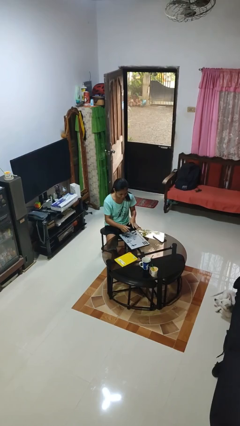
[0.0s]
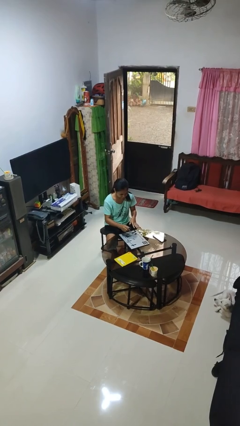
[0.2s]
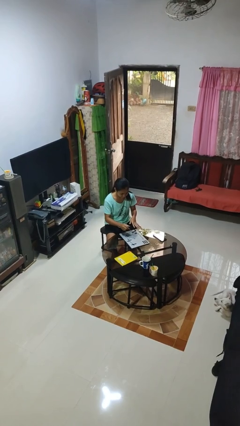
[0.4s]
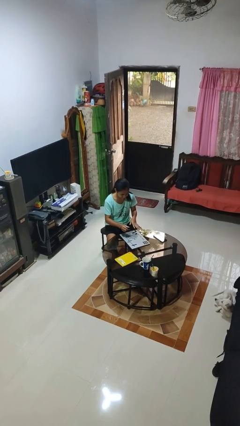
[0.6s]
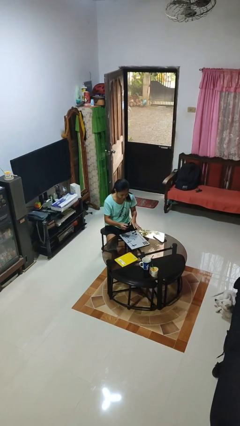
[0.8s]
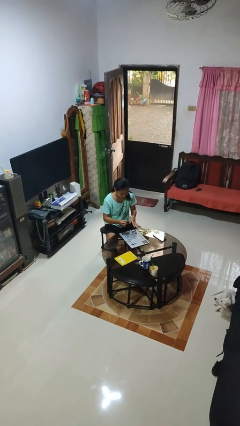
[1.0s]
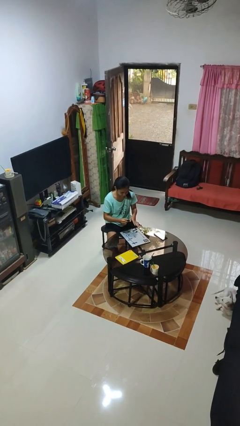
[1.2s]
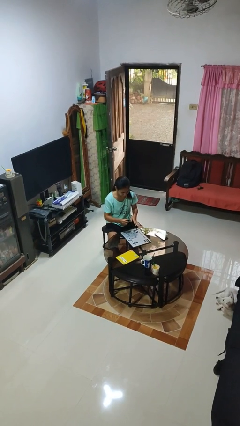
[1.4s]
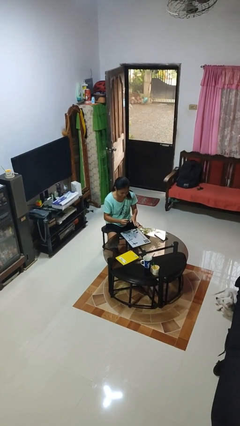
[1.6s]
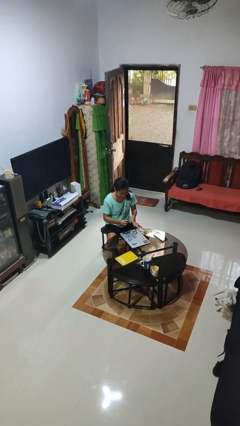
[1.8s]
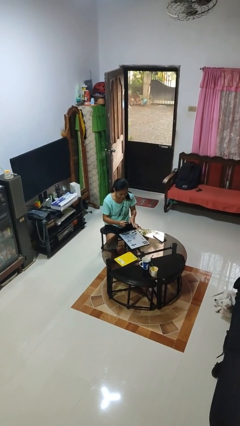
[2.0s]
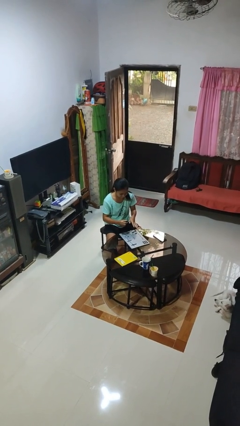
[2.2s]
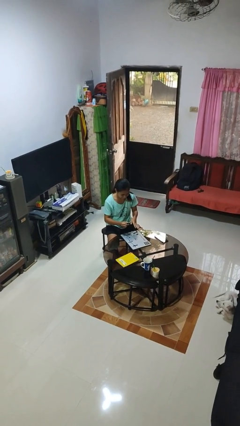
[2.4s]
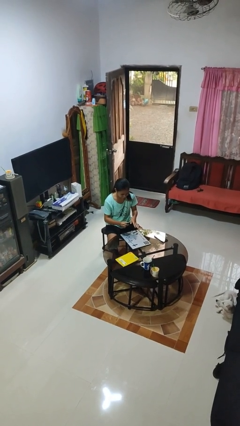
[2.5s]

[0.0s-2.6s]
person paints fingernails

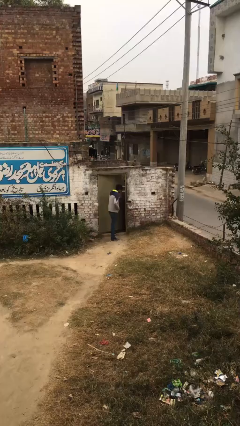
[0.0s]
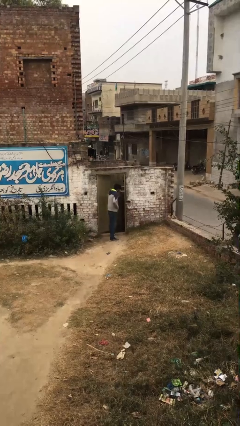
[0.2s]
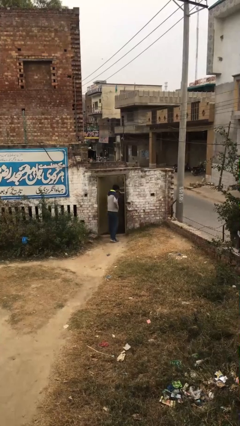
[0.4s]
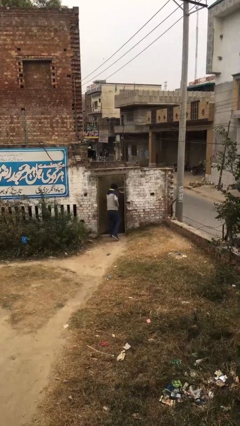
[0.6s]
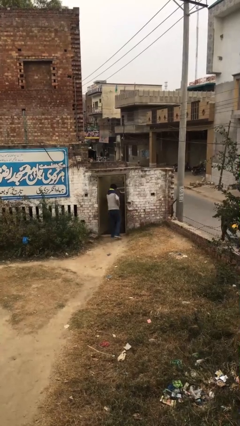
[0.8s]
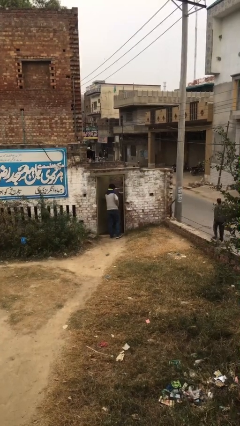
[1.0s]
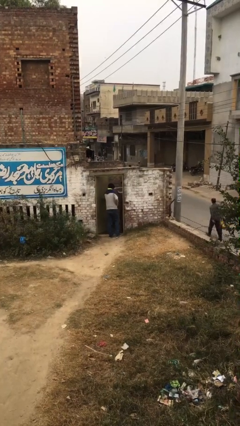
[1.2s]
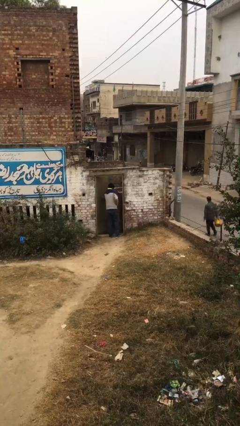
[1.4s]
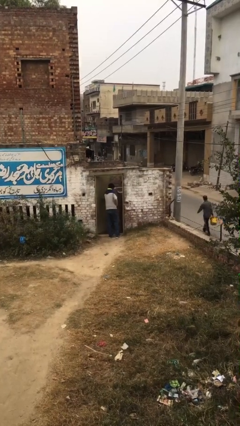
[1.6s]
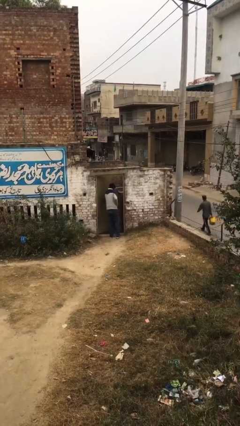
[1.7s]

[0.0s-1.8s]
person opens facility door

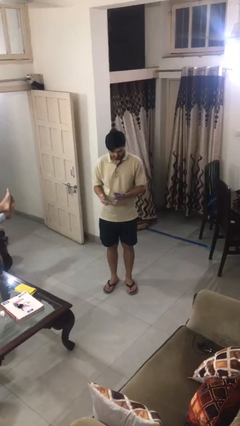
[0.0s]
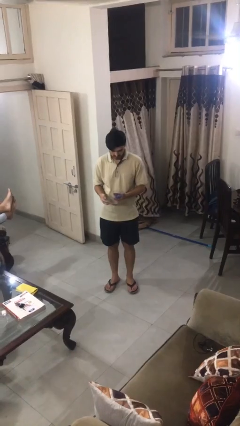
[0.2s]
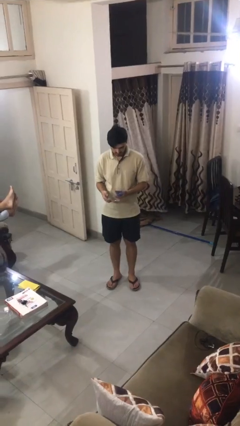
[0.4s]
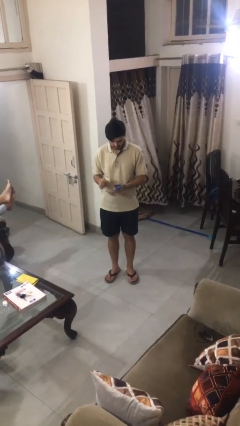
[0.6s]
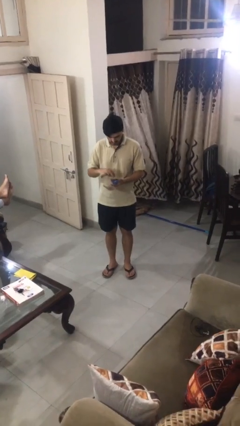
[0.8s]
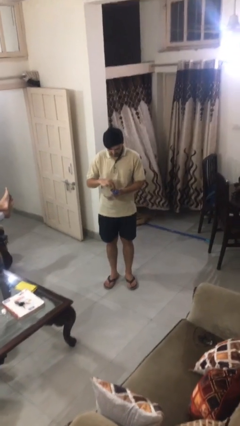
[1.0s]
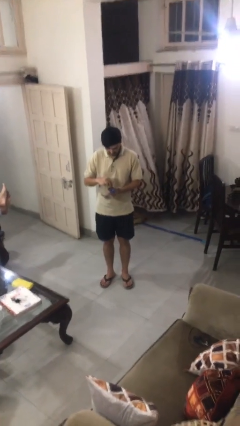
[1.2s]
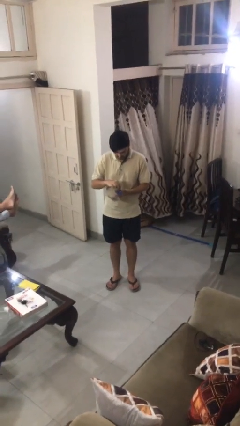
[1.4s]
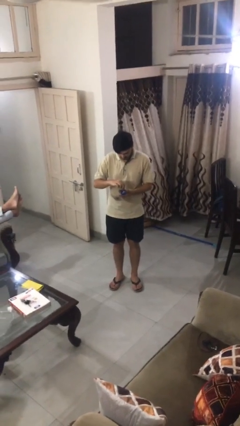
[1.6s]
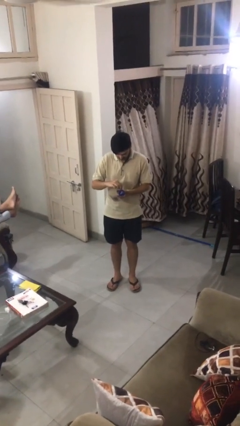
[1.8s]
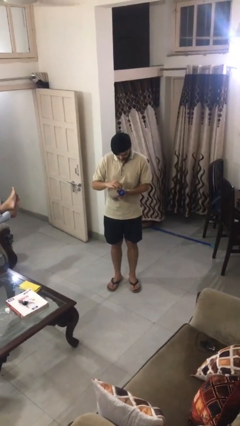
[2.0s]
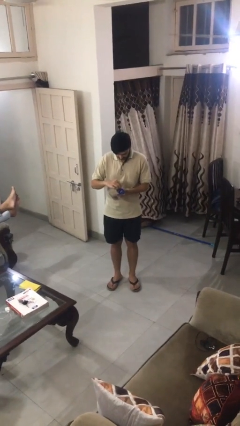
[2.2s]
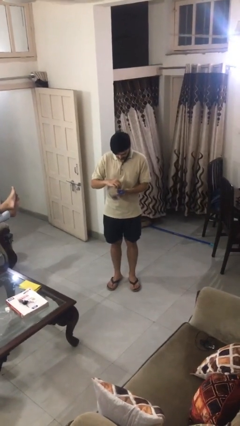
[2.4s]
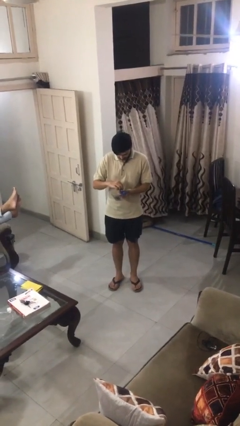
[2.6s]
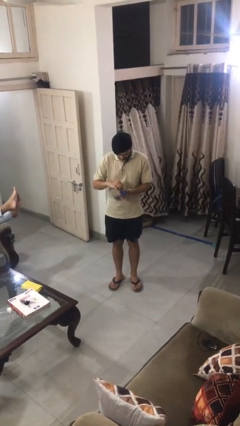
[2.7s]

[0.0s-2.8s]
person searches jewelry box

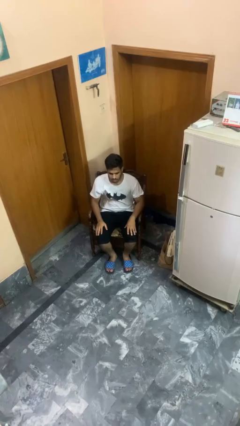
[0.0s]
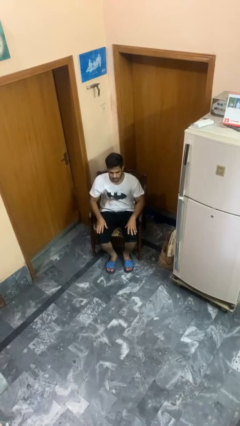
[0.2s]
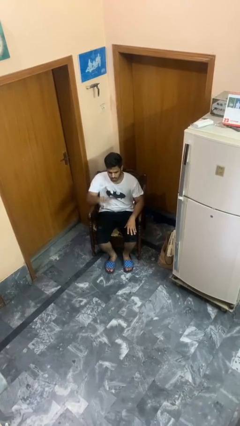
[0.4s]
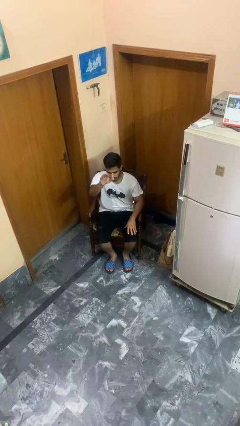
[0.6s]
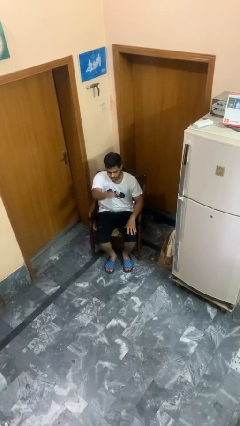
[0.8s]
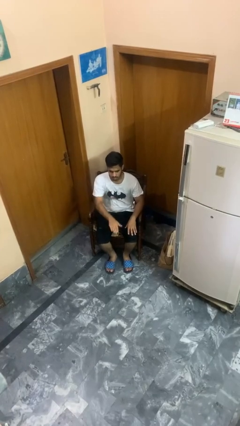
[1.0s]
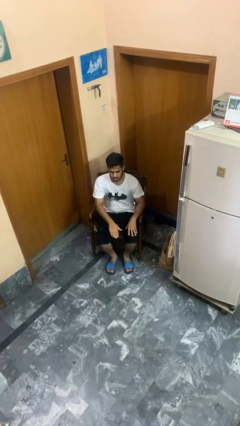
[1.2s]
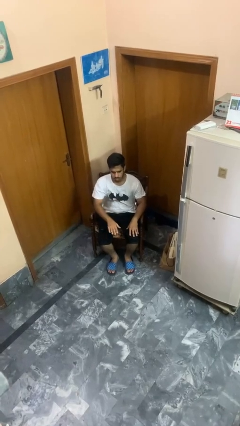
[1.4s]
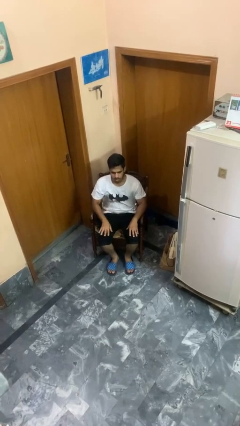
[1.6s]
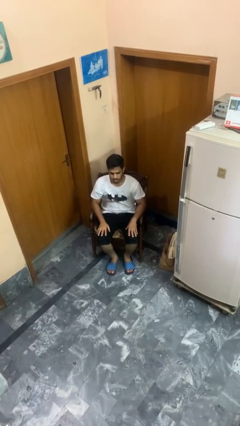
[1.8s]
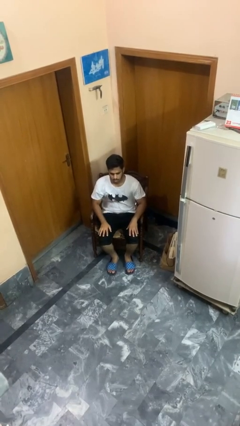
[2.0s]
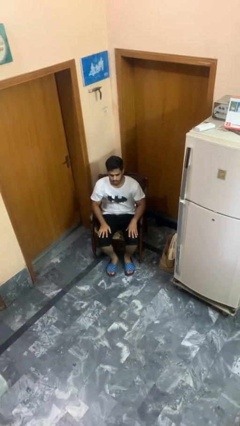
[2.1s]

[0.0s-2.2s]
person gestures swipe down

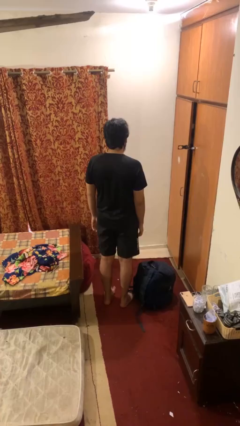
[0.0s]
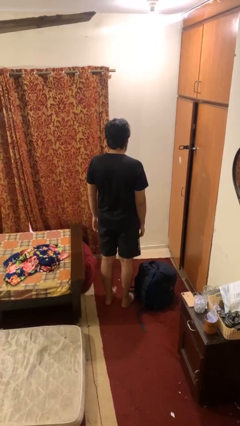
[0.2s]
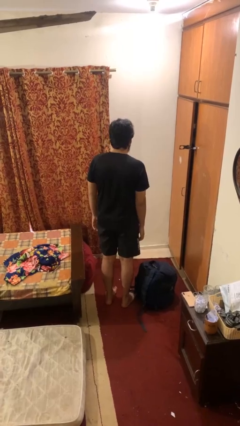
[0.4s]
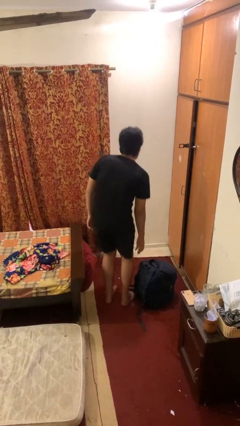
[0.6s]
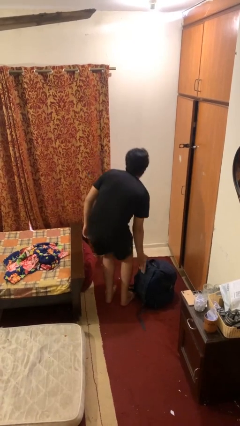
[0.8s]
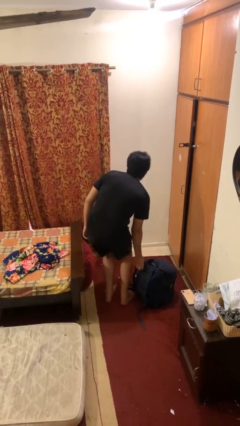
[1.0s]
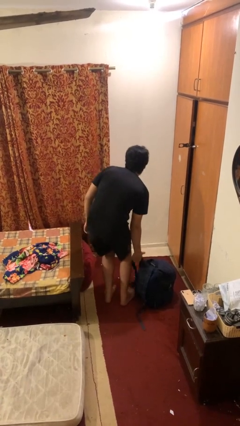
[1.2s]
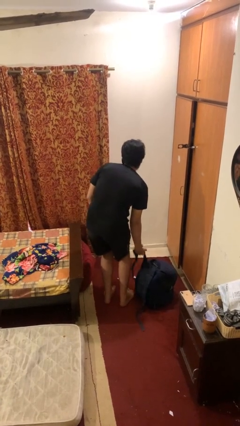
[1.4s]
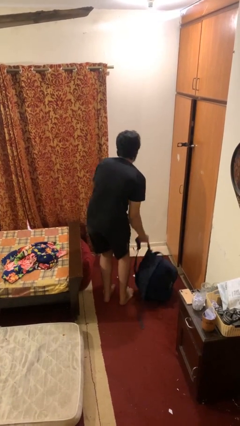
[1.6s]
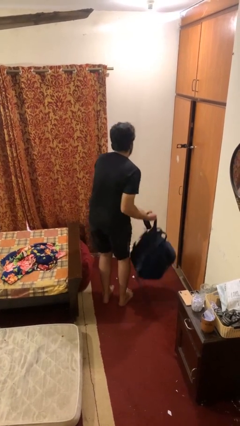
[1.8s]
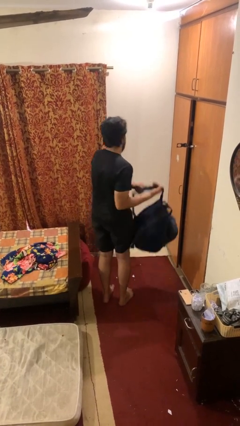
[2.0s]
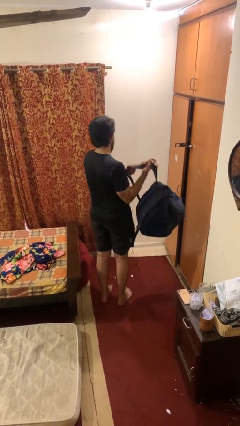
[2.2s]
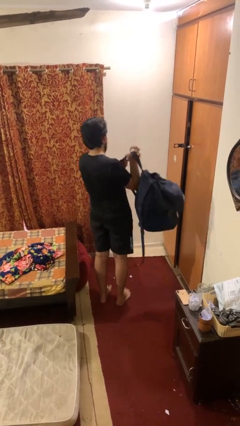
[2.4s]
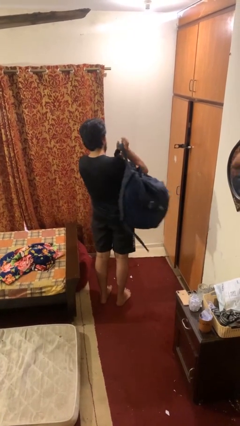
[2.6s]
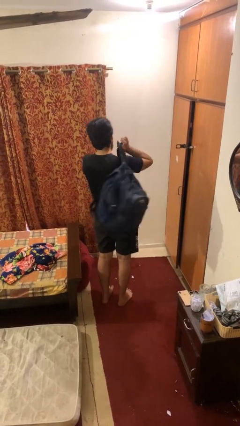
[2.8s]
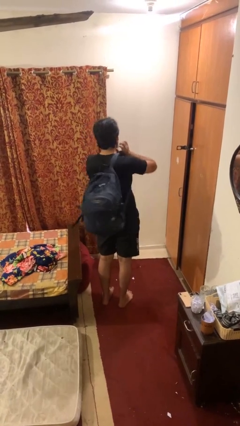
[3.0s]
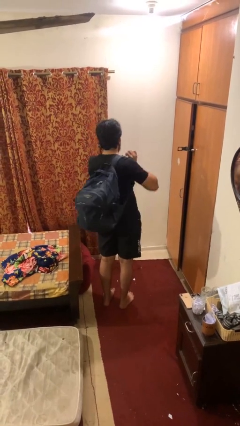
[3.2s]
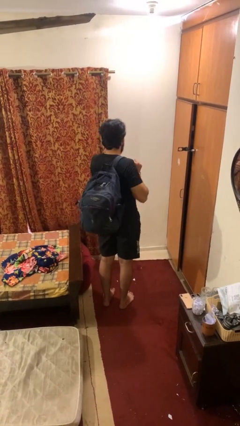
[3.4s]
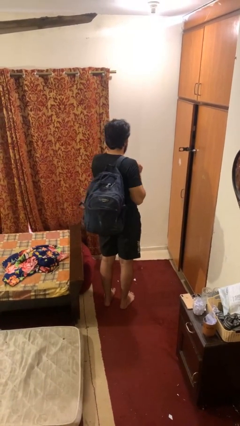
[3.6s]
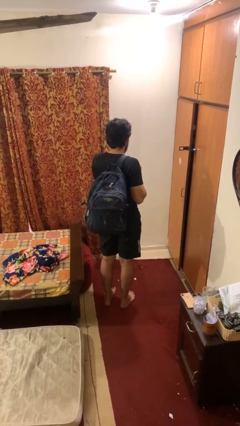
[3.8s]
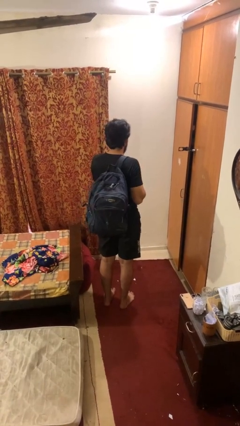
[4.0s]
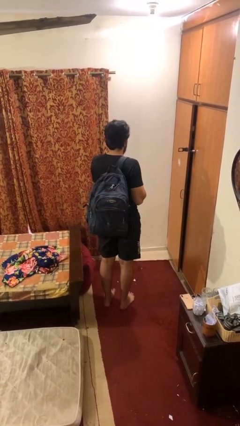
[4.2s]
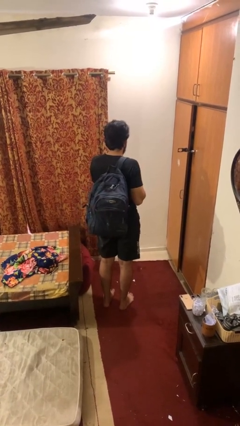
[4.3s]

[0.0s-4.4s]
person puts on backpack

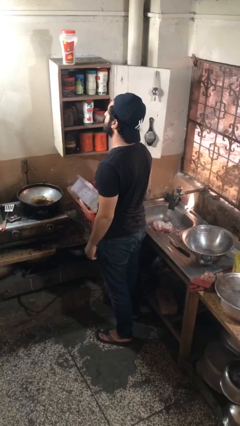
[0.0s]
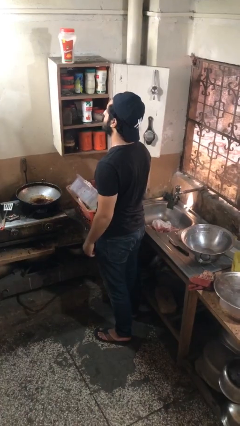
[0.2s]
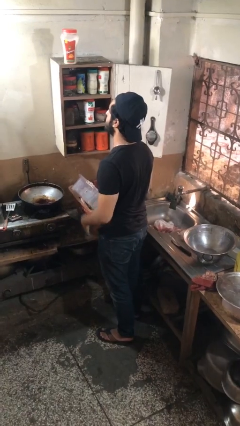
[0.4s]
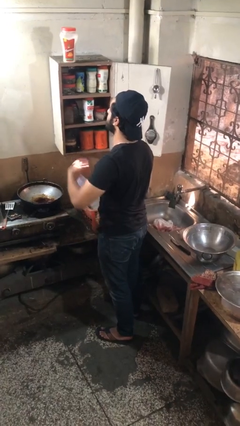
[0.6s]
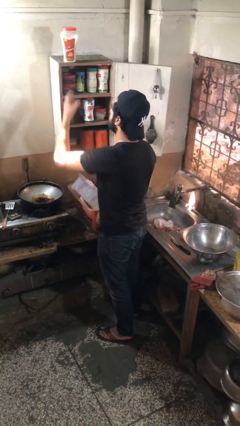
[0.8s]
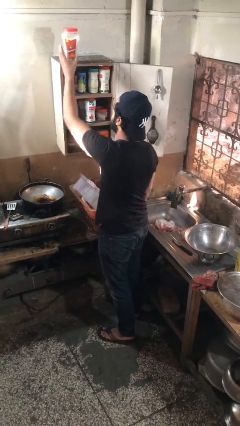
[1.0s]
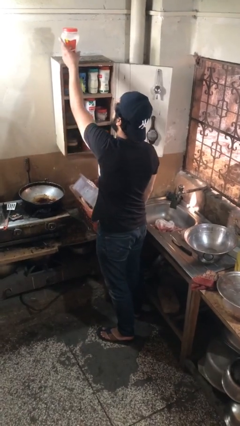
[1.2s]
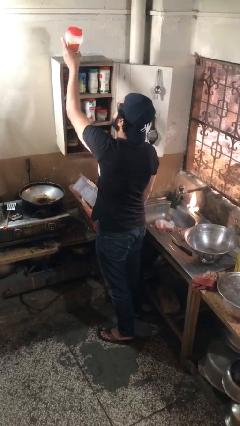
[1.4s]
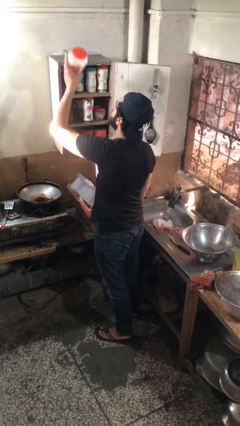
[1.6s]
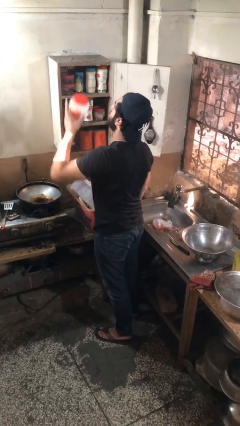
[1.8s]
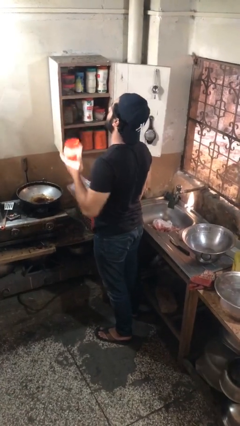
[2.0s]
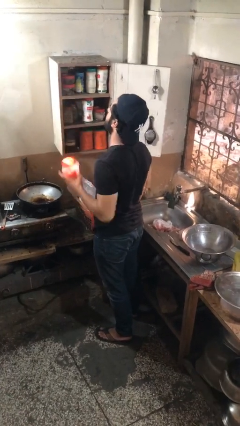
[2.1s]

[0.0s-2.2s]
person takes object from cabinet

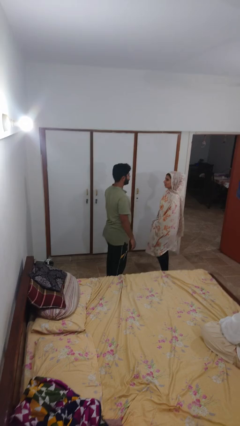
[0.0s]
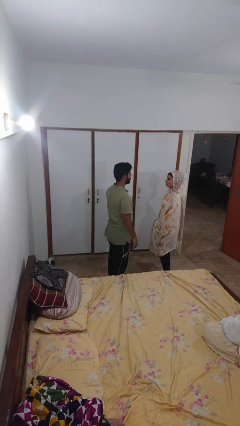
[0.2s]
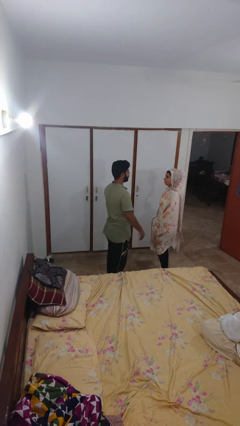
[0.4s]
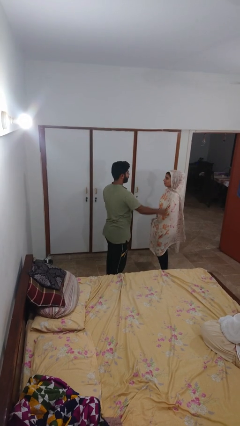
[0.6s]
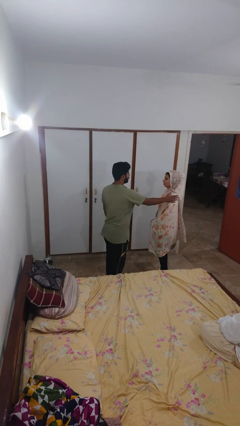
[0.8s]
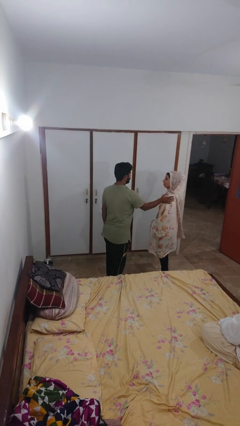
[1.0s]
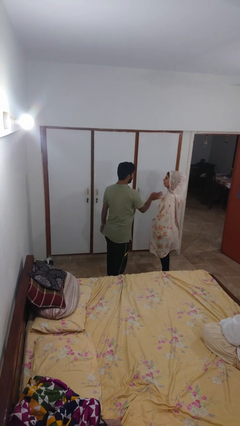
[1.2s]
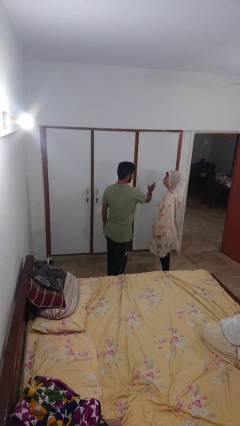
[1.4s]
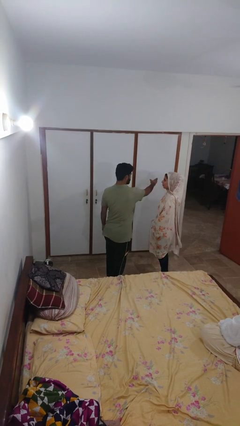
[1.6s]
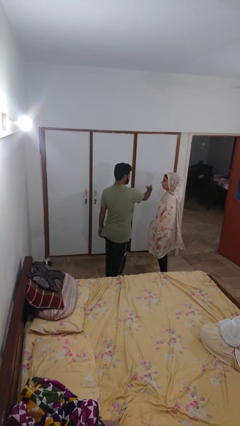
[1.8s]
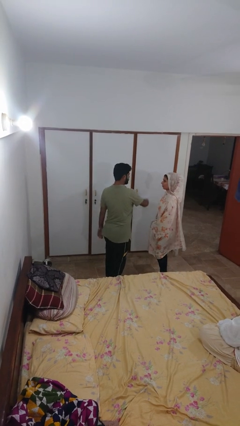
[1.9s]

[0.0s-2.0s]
person shoves person
